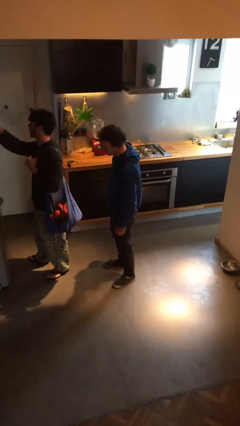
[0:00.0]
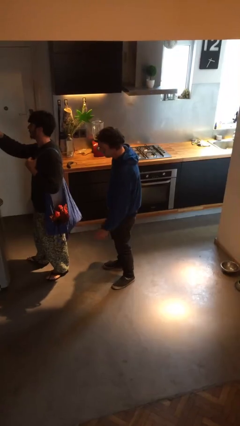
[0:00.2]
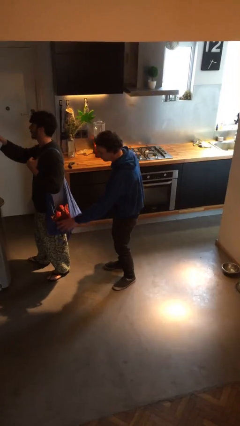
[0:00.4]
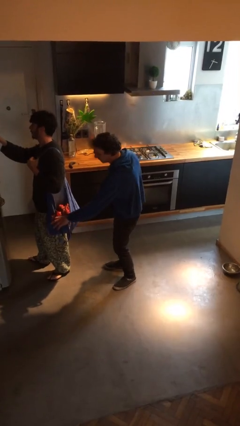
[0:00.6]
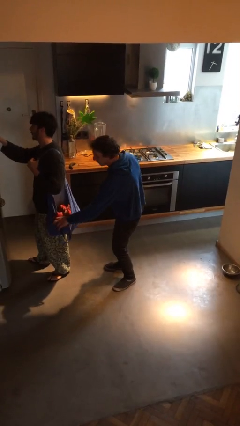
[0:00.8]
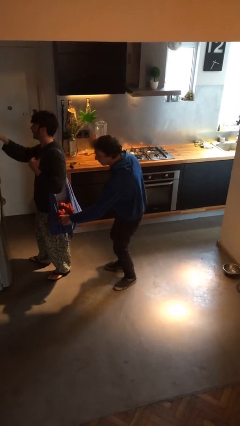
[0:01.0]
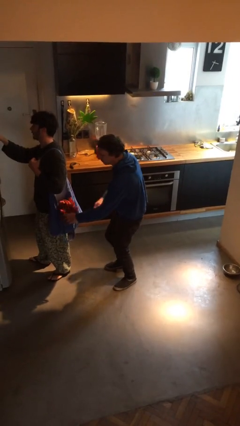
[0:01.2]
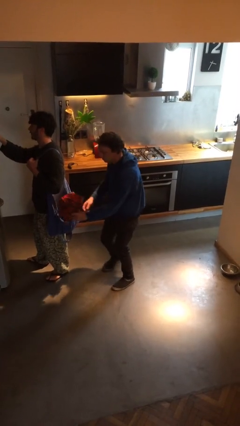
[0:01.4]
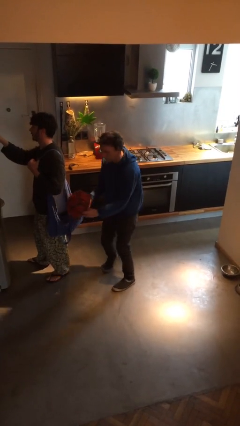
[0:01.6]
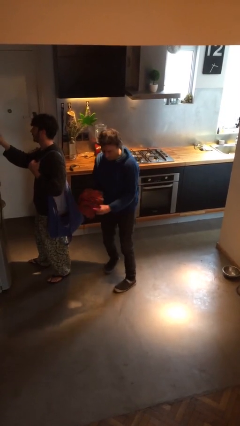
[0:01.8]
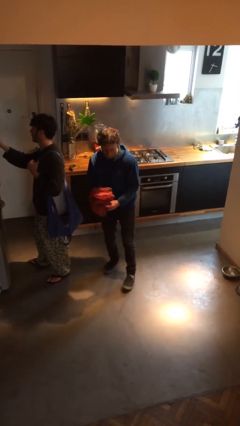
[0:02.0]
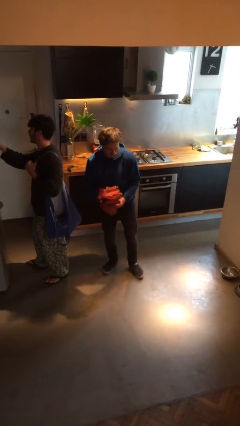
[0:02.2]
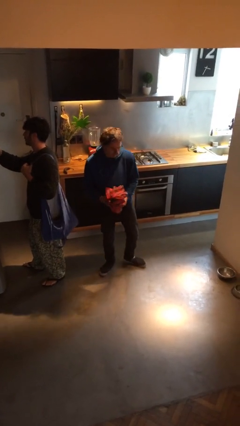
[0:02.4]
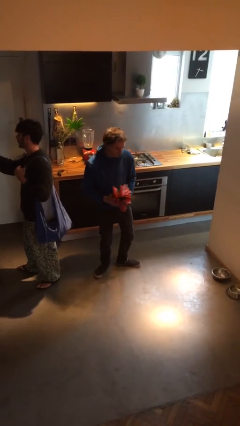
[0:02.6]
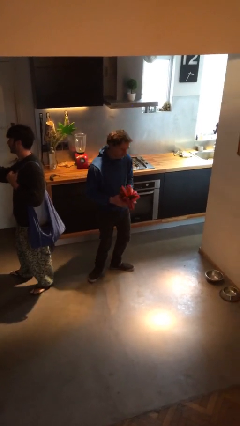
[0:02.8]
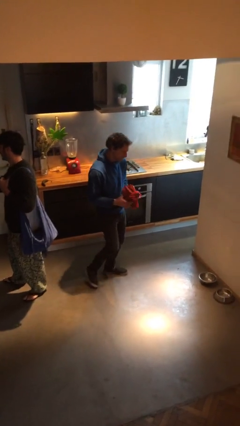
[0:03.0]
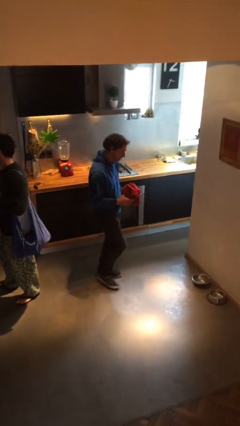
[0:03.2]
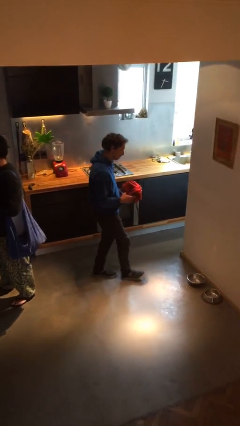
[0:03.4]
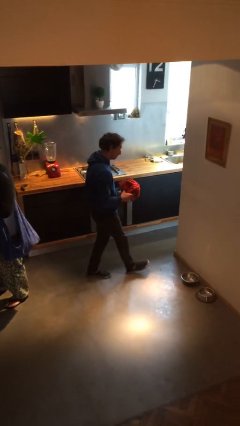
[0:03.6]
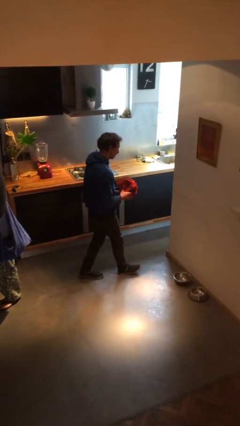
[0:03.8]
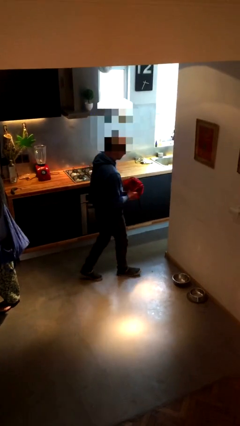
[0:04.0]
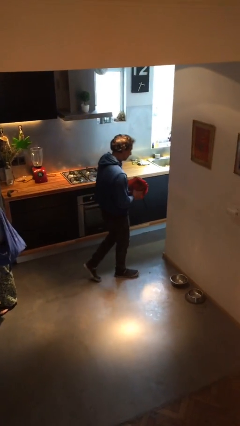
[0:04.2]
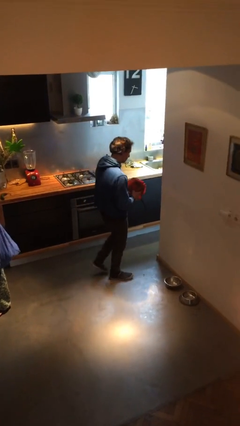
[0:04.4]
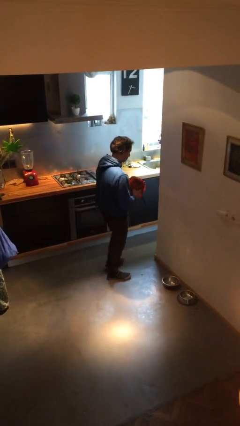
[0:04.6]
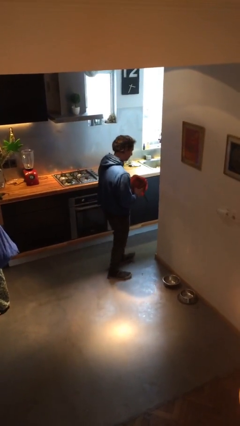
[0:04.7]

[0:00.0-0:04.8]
person steals object from person

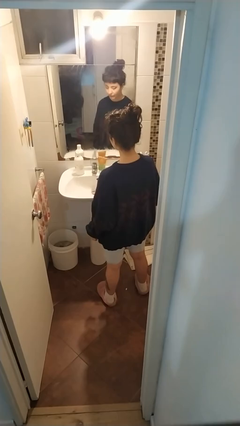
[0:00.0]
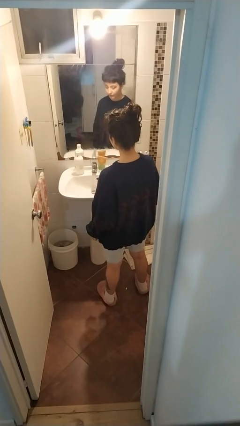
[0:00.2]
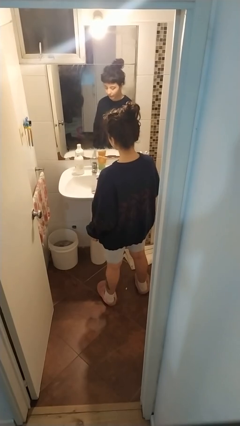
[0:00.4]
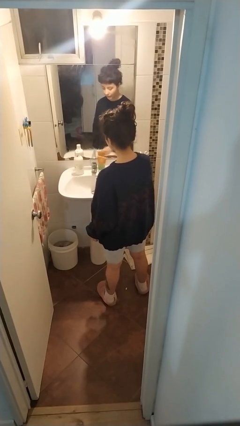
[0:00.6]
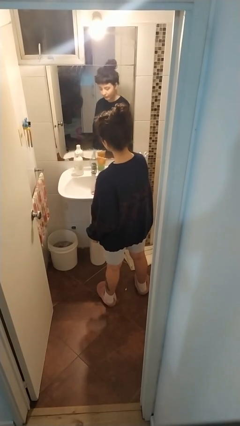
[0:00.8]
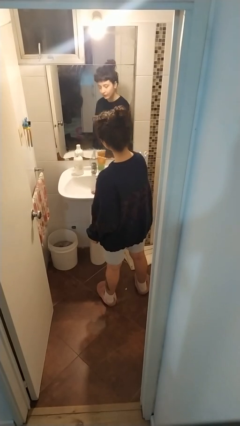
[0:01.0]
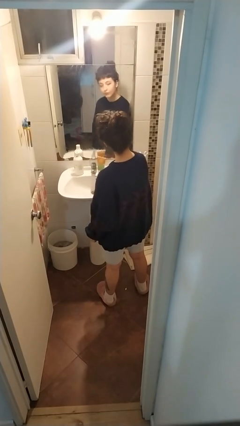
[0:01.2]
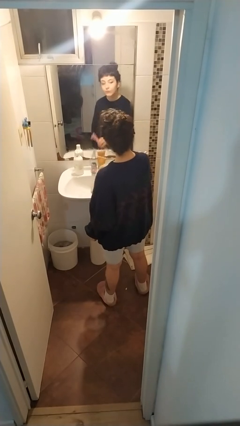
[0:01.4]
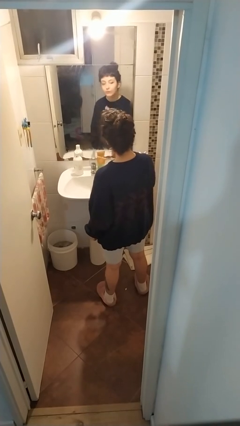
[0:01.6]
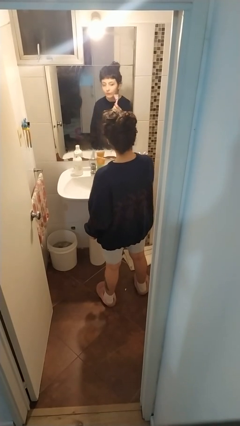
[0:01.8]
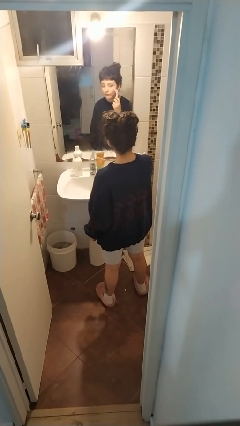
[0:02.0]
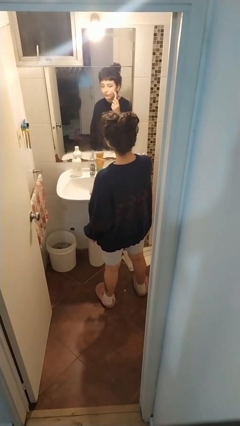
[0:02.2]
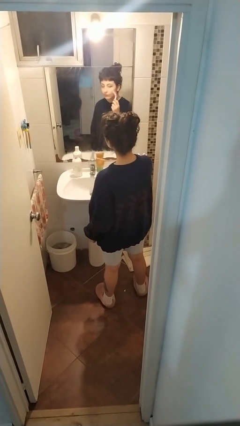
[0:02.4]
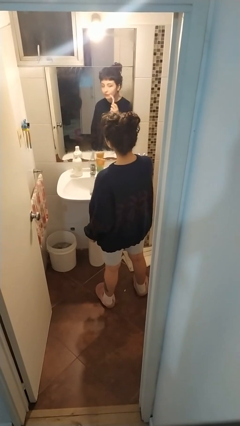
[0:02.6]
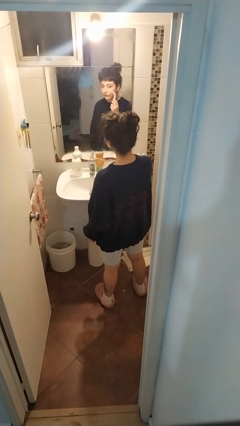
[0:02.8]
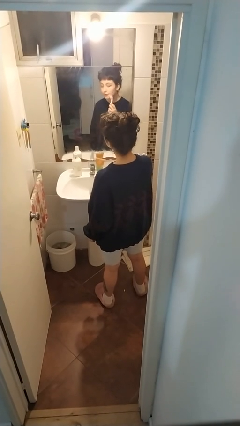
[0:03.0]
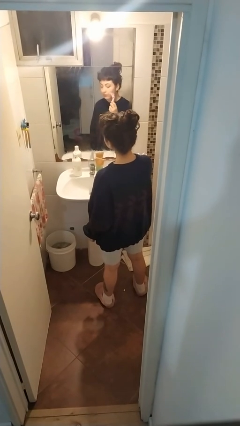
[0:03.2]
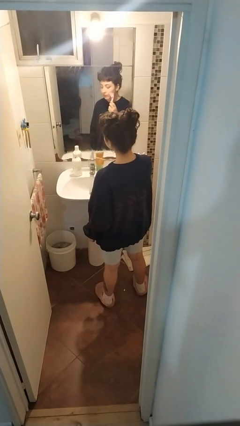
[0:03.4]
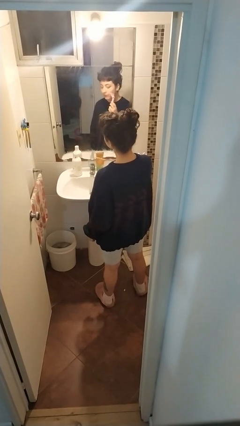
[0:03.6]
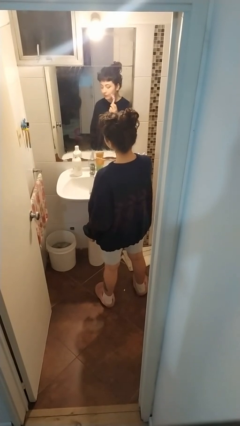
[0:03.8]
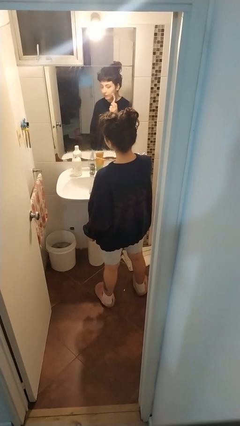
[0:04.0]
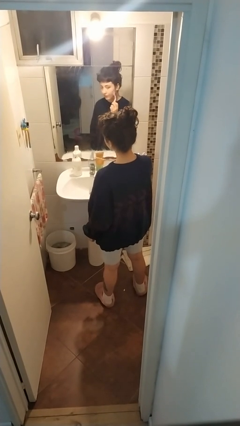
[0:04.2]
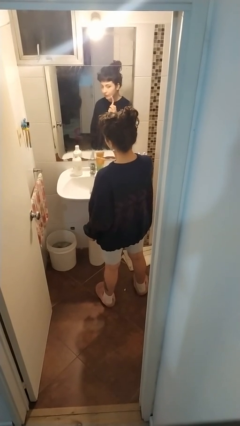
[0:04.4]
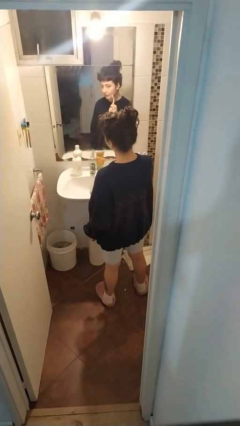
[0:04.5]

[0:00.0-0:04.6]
person shaves face

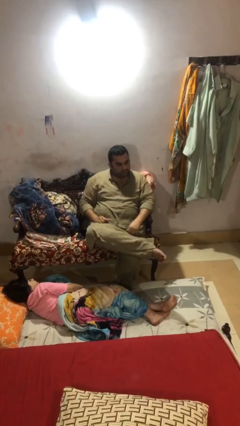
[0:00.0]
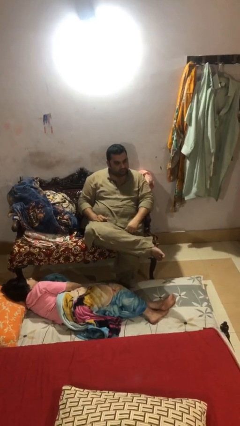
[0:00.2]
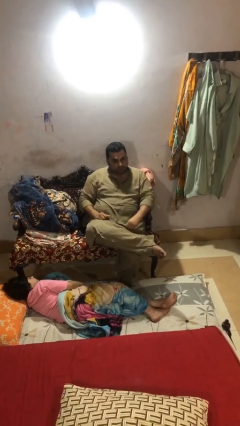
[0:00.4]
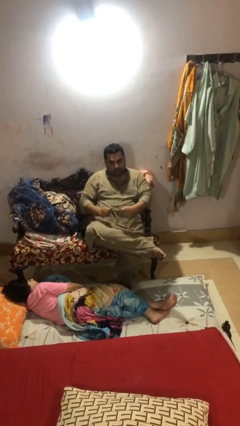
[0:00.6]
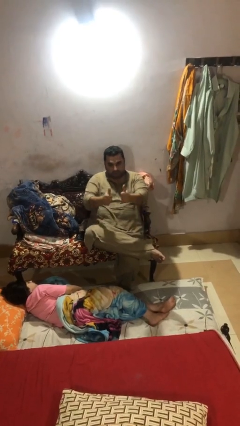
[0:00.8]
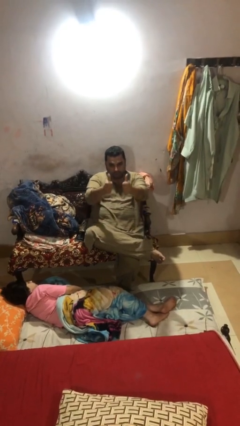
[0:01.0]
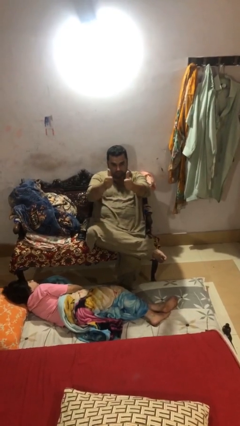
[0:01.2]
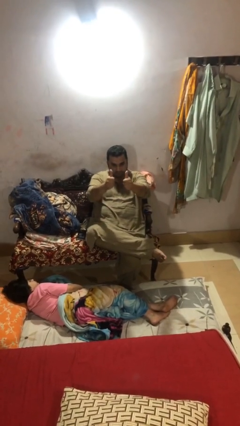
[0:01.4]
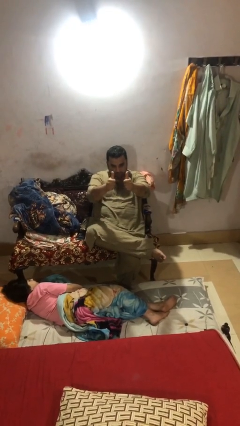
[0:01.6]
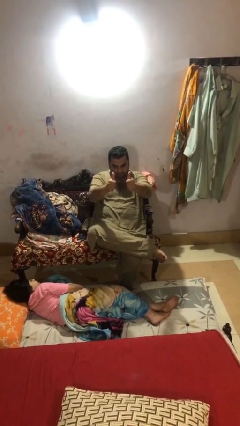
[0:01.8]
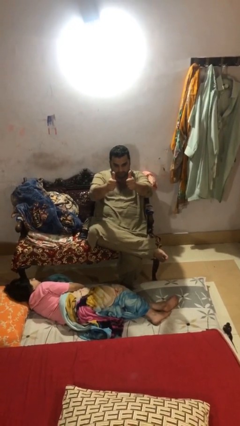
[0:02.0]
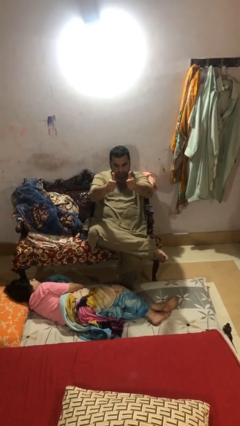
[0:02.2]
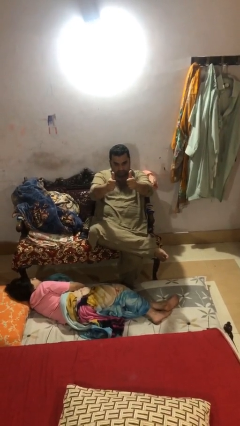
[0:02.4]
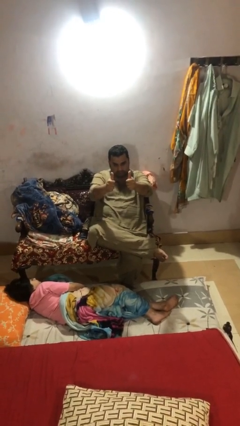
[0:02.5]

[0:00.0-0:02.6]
person gestures thumbs up

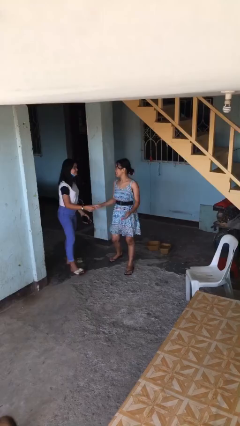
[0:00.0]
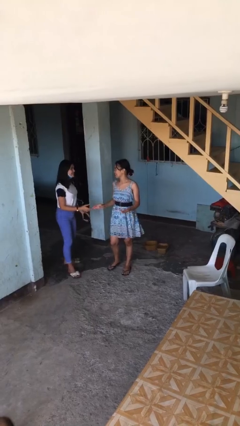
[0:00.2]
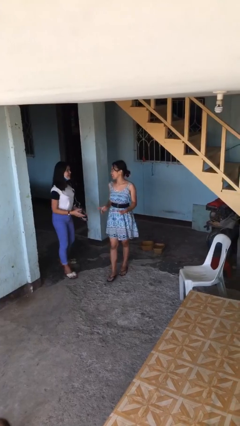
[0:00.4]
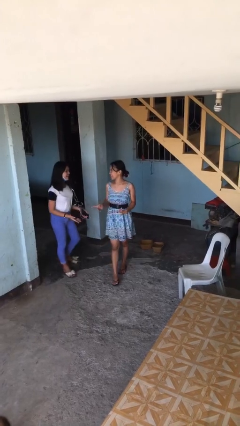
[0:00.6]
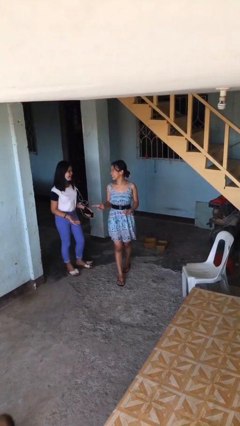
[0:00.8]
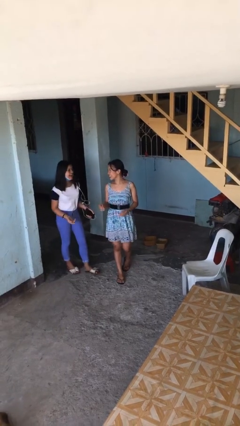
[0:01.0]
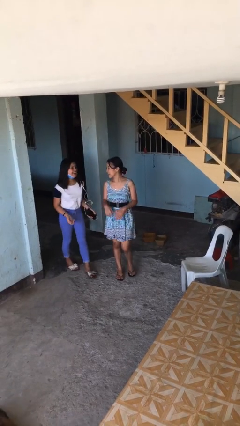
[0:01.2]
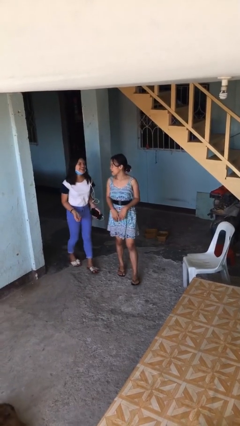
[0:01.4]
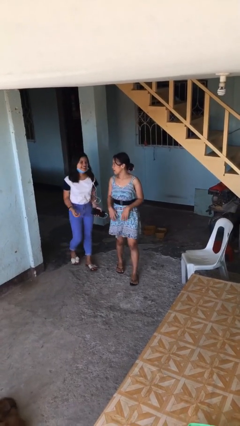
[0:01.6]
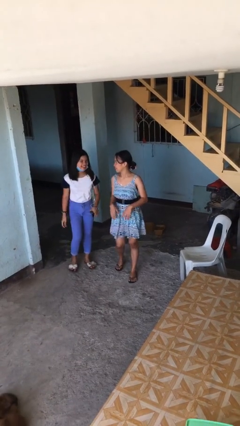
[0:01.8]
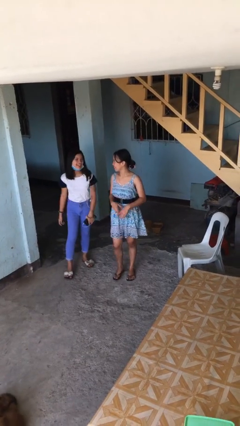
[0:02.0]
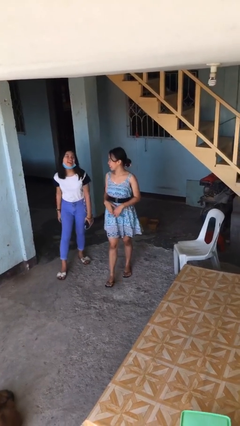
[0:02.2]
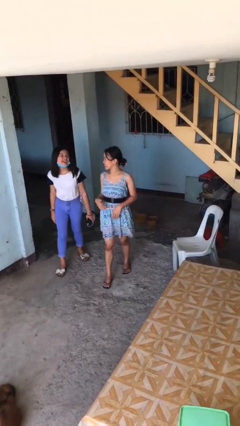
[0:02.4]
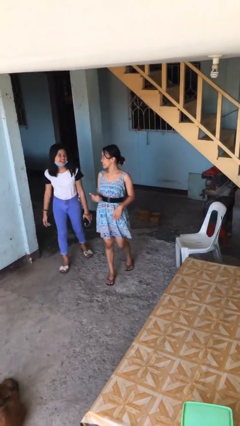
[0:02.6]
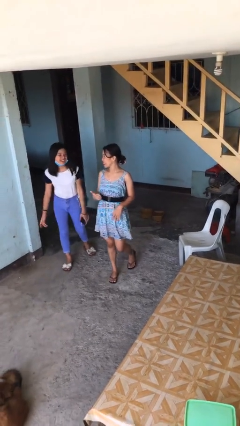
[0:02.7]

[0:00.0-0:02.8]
person talks to person

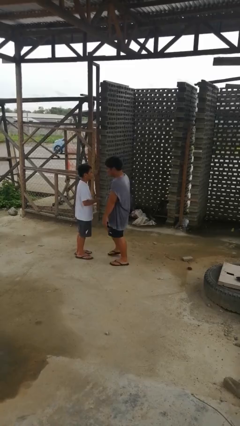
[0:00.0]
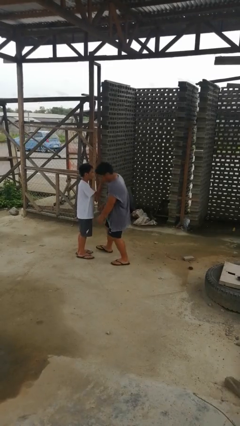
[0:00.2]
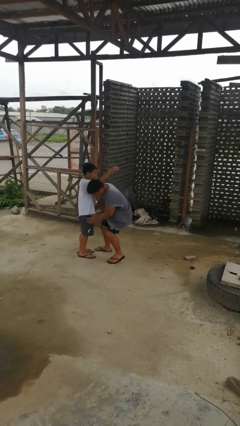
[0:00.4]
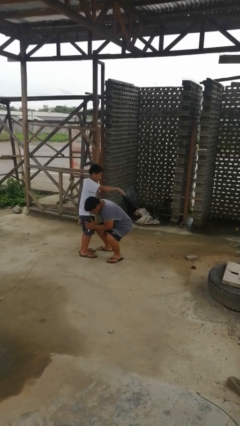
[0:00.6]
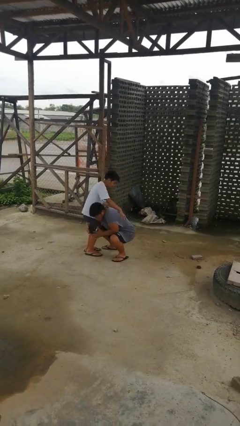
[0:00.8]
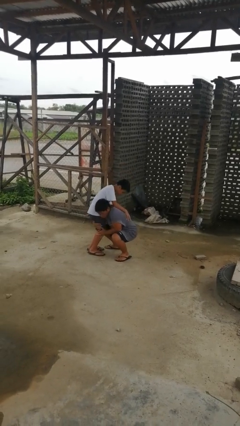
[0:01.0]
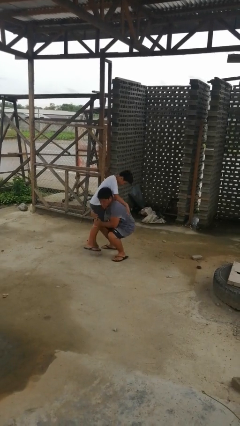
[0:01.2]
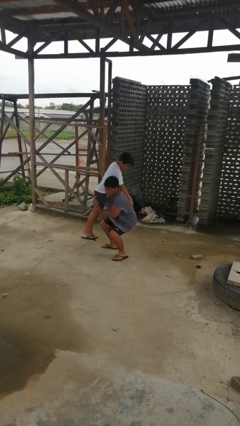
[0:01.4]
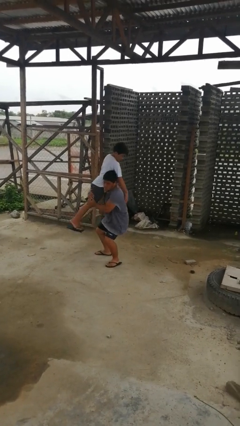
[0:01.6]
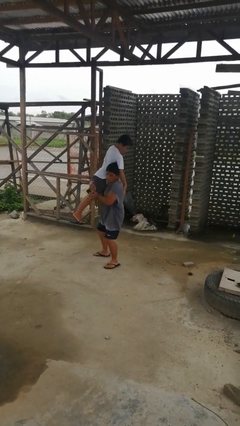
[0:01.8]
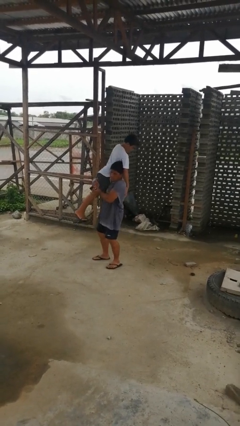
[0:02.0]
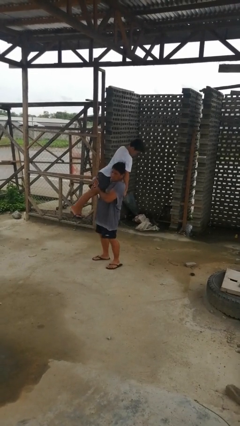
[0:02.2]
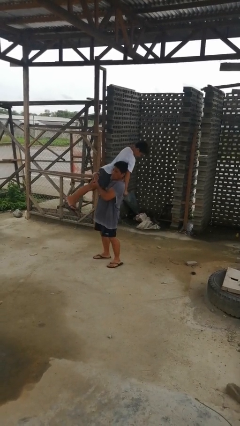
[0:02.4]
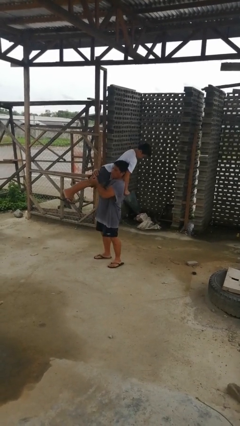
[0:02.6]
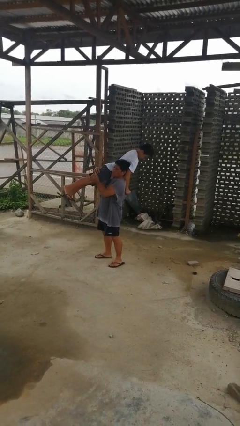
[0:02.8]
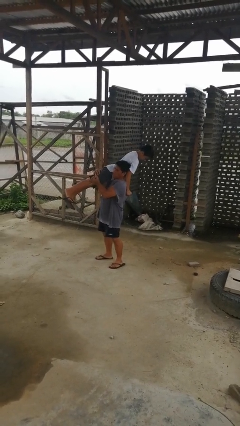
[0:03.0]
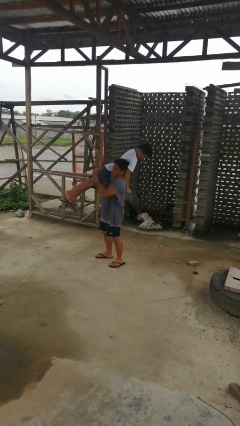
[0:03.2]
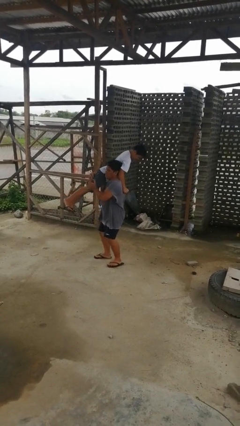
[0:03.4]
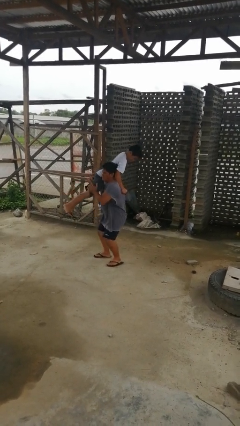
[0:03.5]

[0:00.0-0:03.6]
person carries person over shoulder
